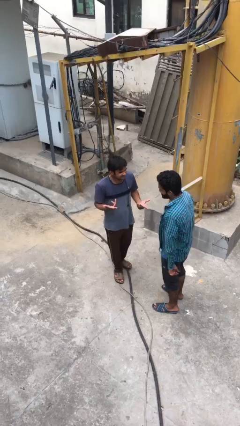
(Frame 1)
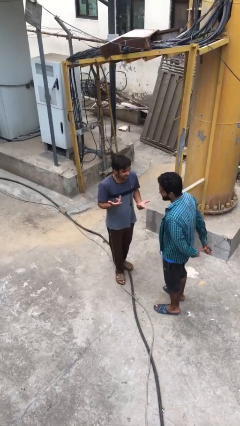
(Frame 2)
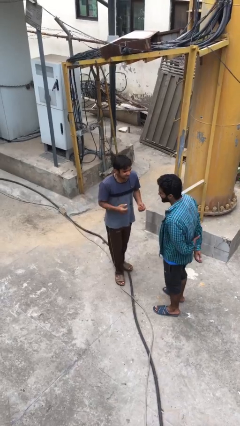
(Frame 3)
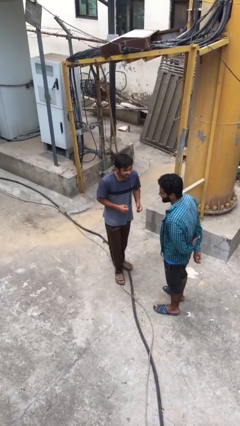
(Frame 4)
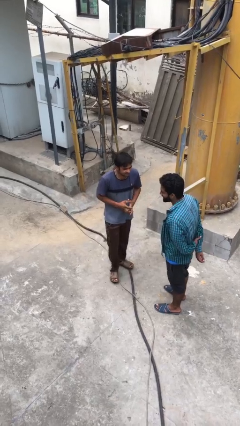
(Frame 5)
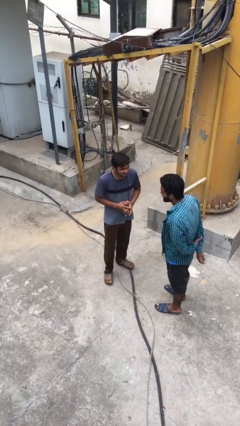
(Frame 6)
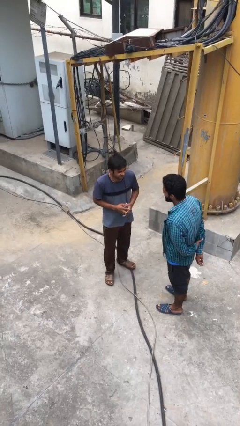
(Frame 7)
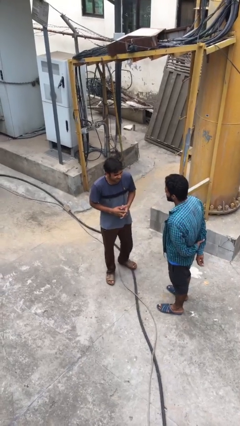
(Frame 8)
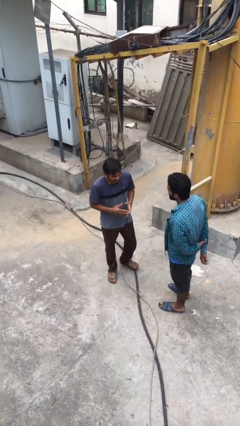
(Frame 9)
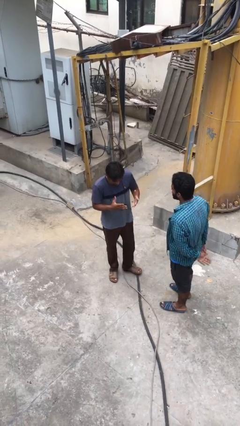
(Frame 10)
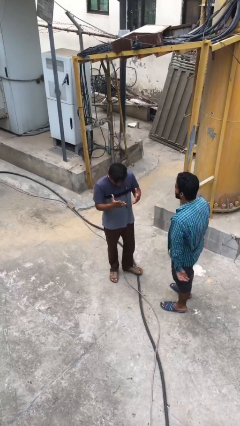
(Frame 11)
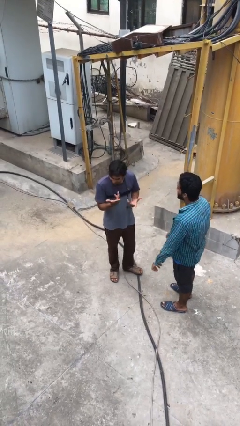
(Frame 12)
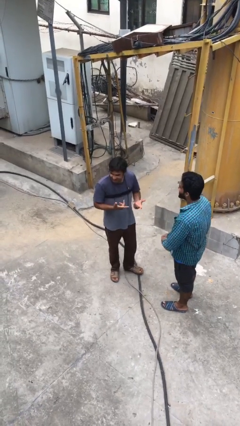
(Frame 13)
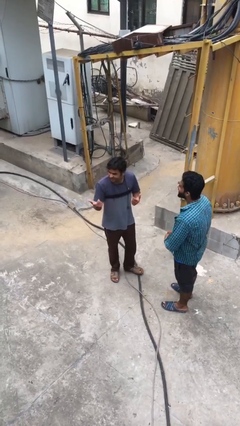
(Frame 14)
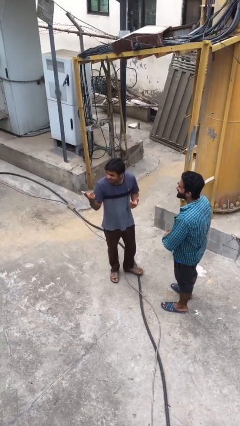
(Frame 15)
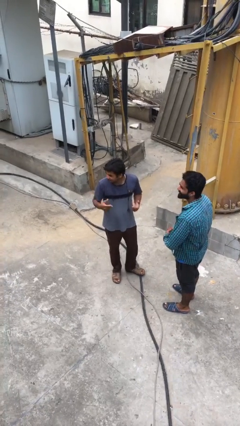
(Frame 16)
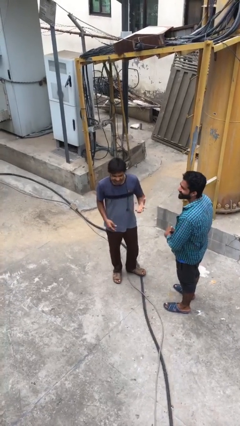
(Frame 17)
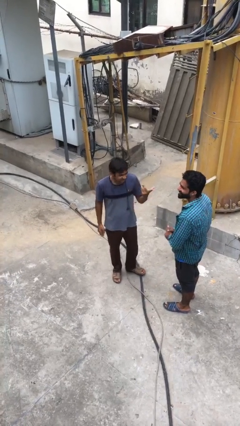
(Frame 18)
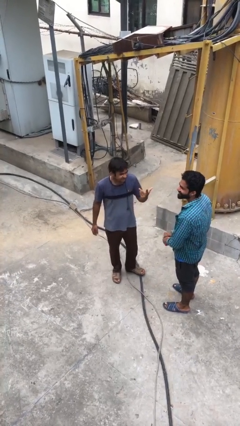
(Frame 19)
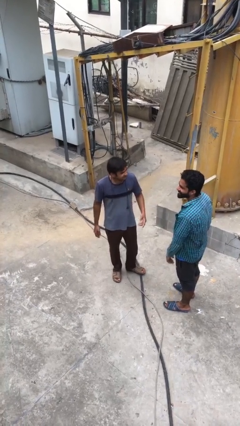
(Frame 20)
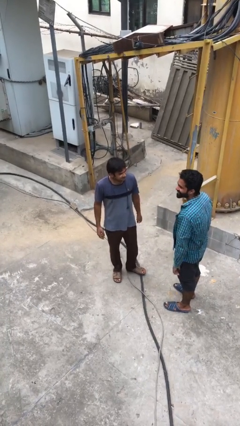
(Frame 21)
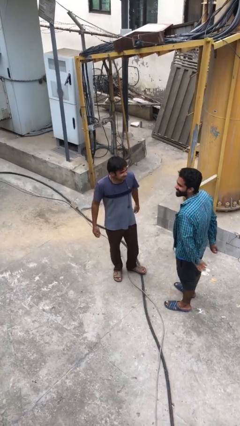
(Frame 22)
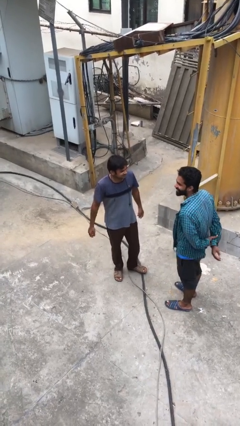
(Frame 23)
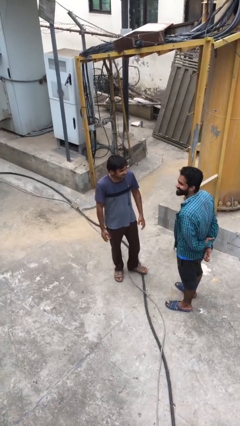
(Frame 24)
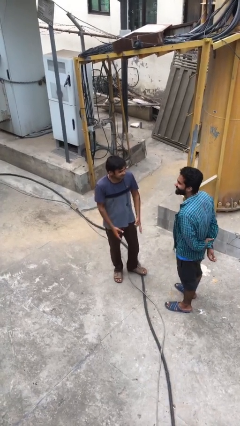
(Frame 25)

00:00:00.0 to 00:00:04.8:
person talks to person

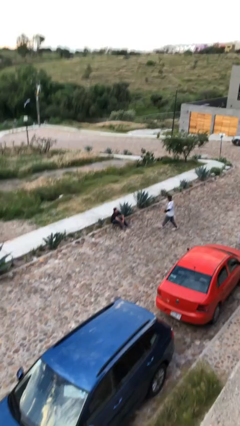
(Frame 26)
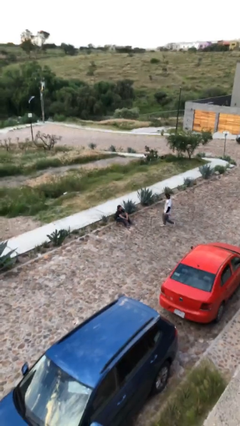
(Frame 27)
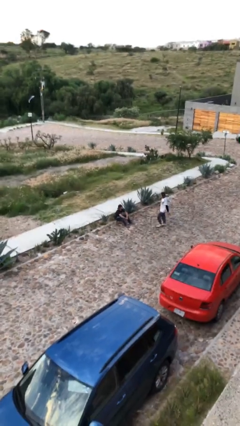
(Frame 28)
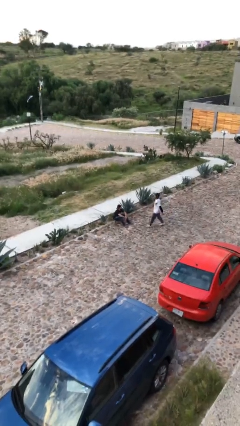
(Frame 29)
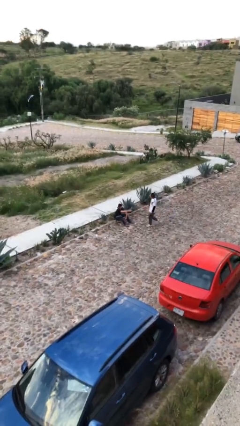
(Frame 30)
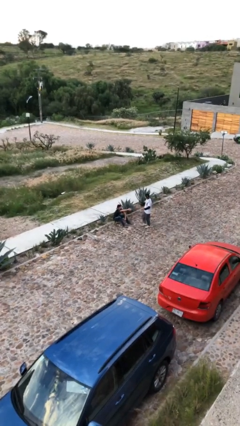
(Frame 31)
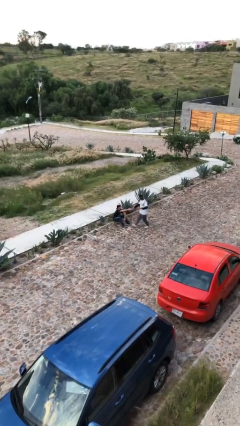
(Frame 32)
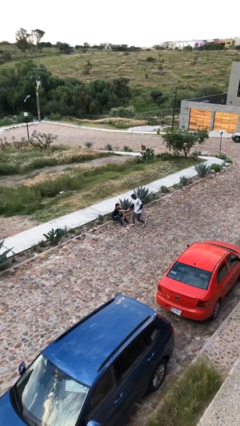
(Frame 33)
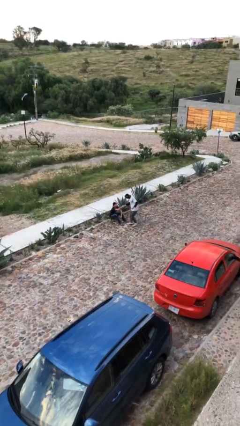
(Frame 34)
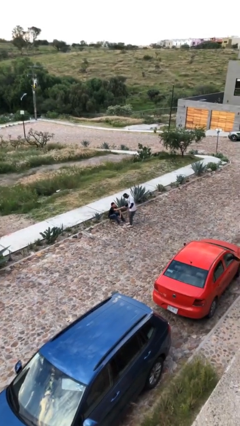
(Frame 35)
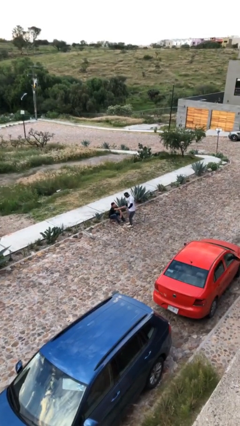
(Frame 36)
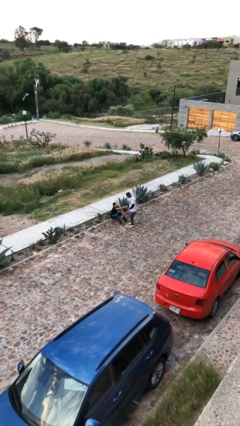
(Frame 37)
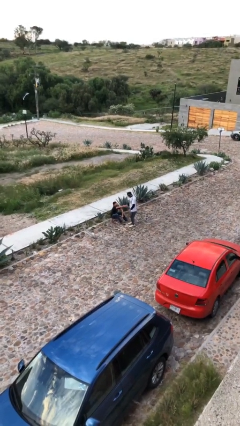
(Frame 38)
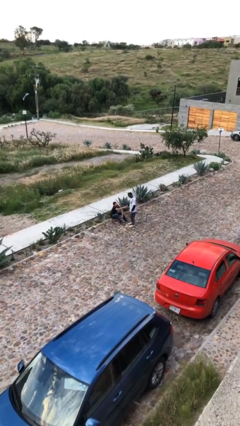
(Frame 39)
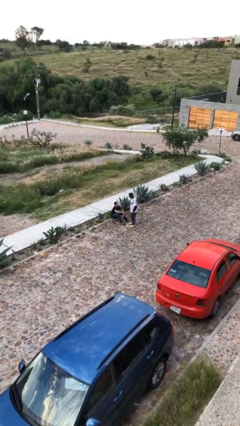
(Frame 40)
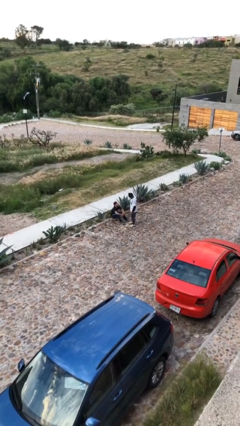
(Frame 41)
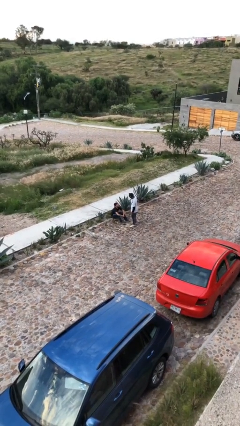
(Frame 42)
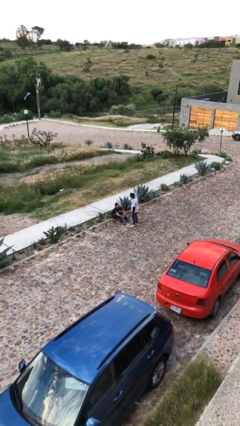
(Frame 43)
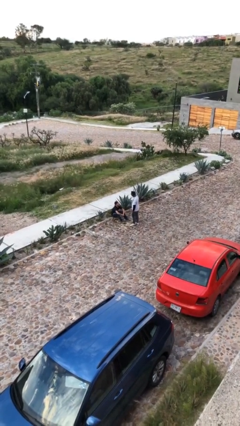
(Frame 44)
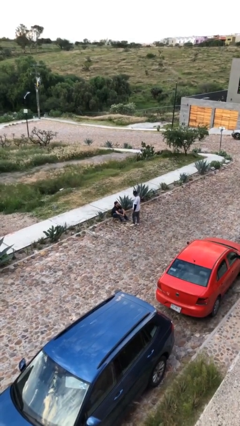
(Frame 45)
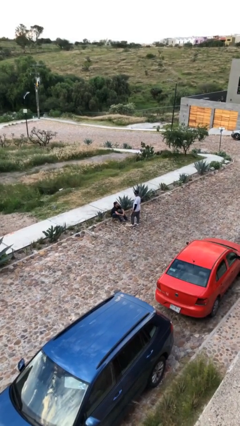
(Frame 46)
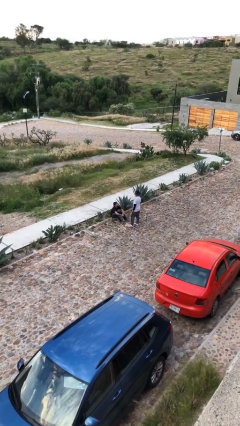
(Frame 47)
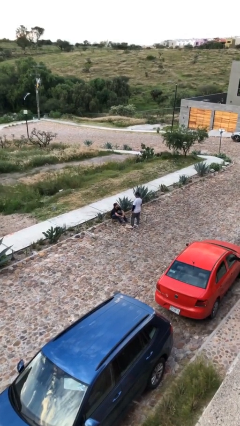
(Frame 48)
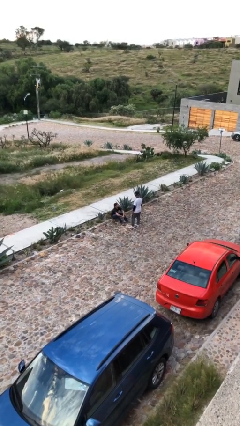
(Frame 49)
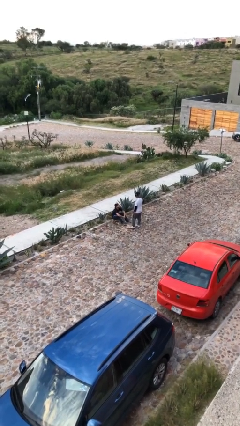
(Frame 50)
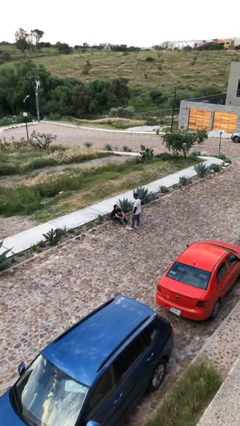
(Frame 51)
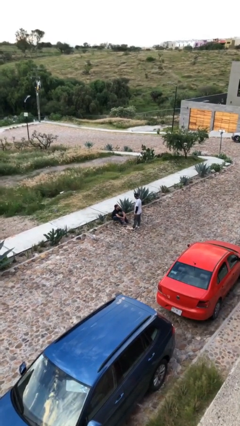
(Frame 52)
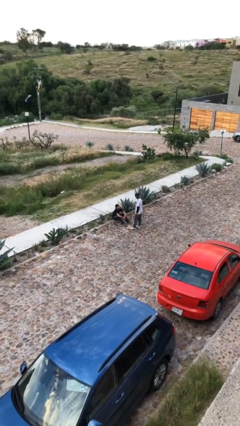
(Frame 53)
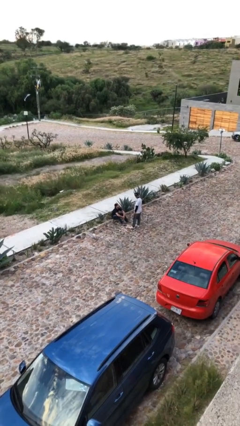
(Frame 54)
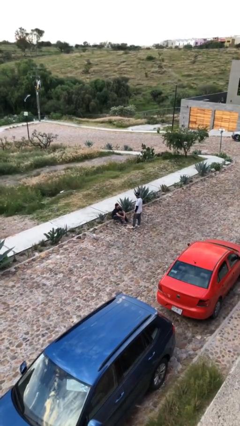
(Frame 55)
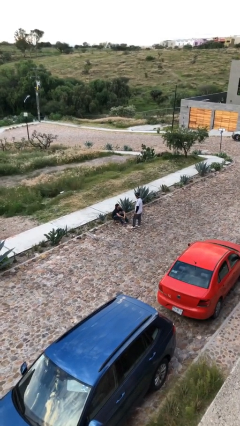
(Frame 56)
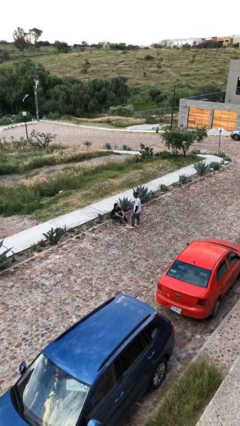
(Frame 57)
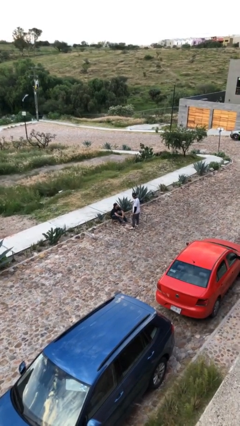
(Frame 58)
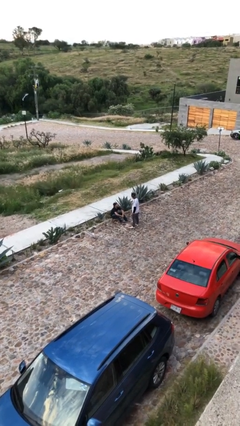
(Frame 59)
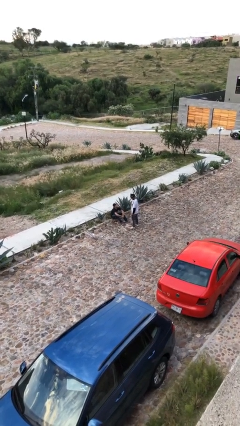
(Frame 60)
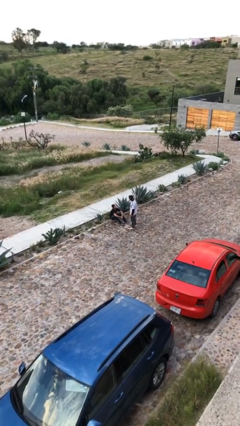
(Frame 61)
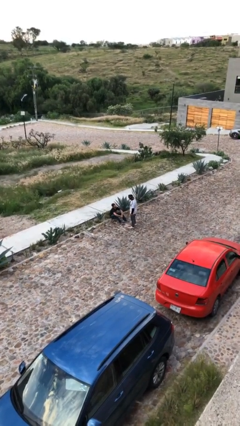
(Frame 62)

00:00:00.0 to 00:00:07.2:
person shakes hand

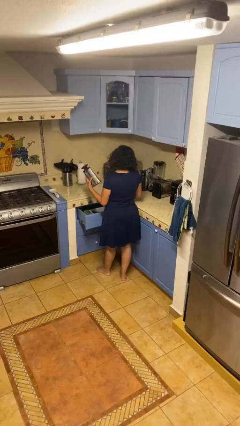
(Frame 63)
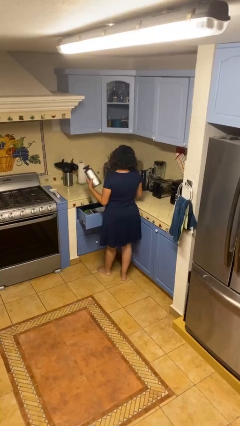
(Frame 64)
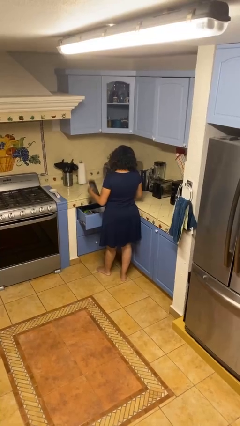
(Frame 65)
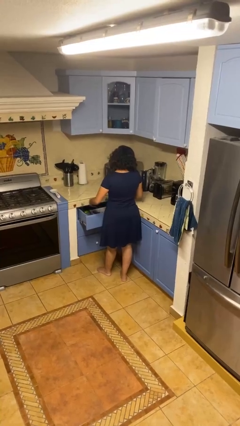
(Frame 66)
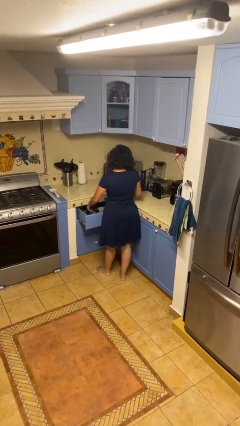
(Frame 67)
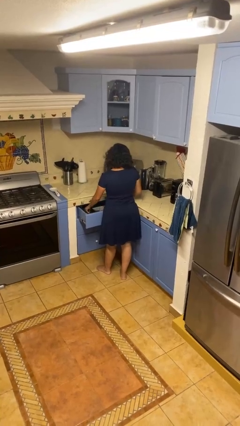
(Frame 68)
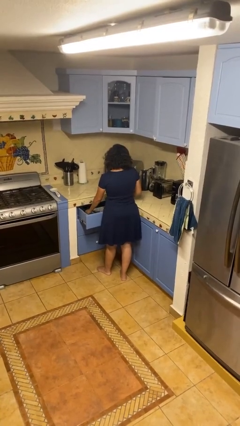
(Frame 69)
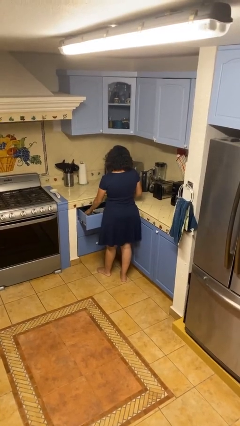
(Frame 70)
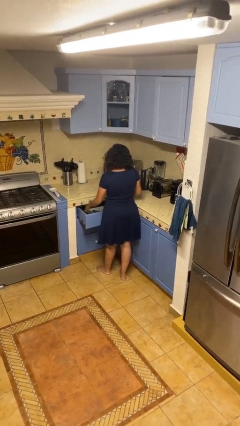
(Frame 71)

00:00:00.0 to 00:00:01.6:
person puts object into kitchen drawer

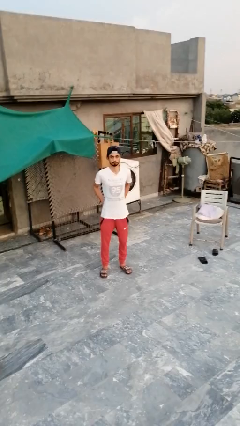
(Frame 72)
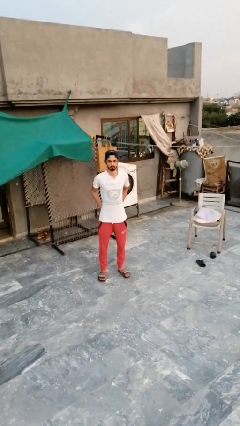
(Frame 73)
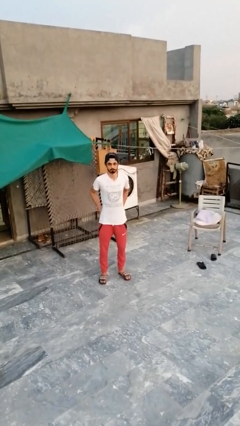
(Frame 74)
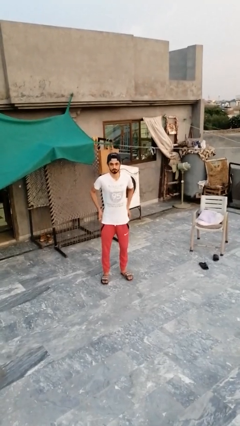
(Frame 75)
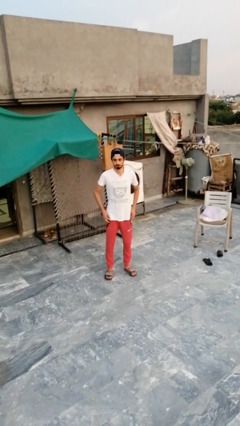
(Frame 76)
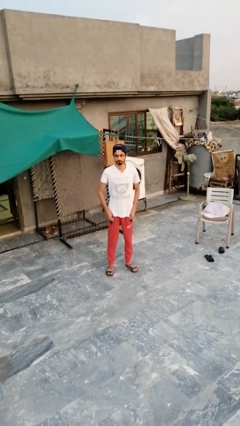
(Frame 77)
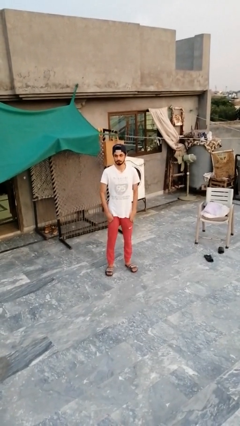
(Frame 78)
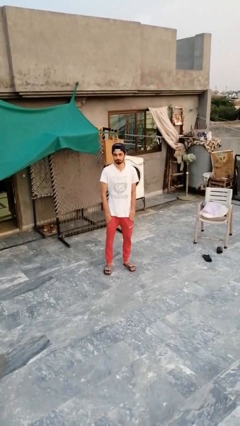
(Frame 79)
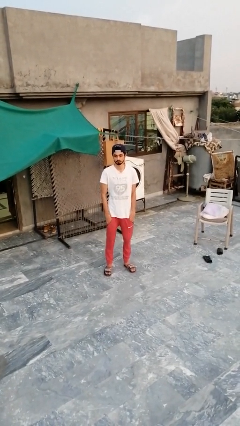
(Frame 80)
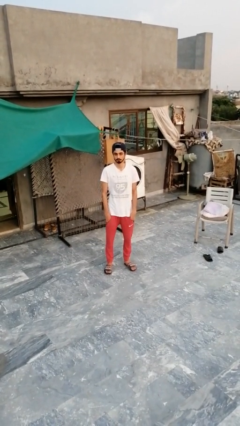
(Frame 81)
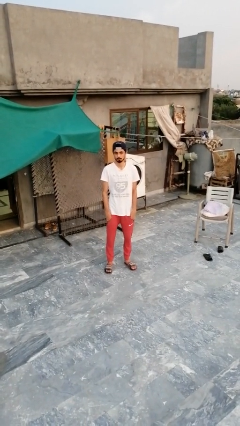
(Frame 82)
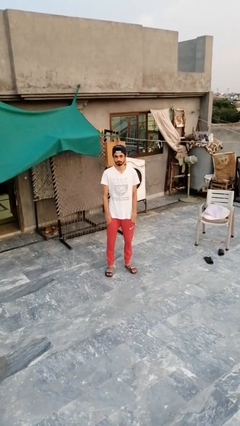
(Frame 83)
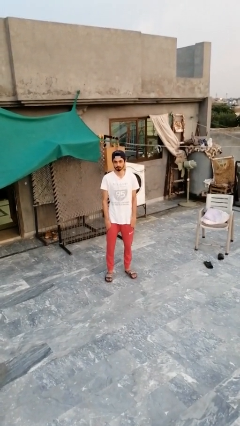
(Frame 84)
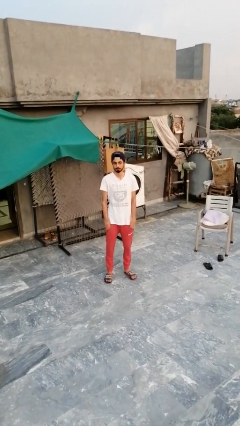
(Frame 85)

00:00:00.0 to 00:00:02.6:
person puts hands in back pockets

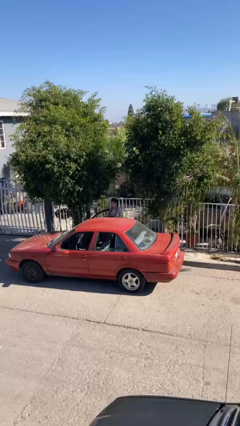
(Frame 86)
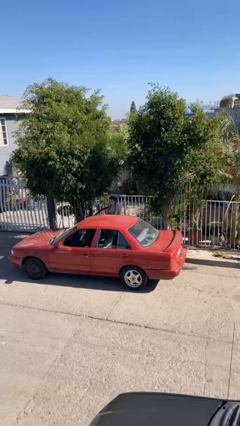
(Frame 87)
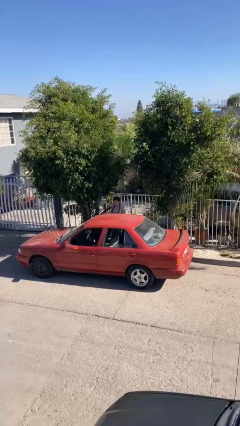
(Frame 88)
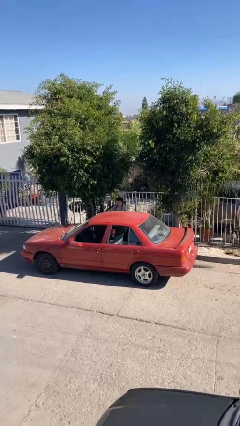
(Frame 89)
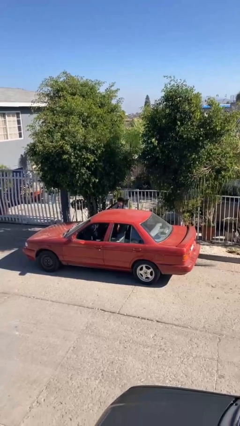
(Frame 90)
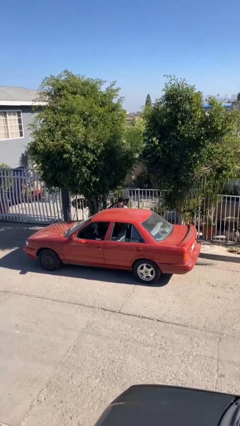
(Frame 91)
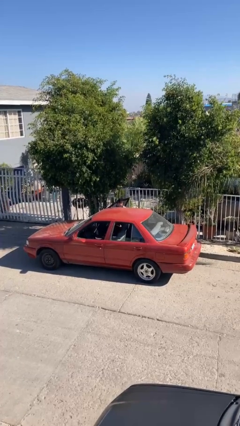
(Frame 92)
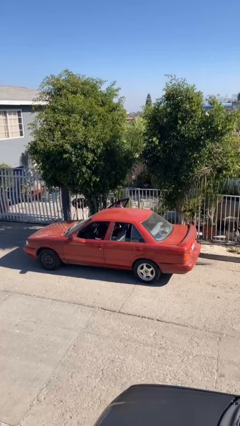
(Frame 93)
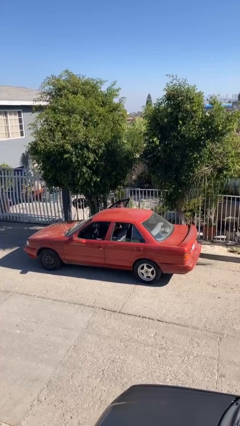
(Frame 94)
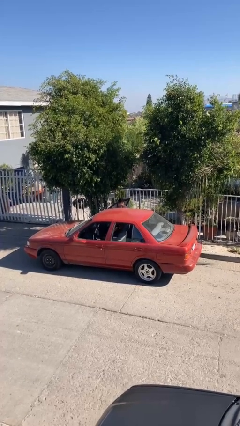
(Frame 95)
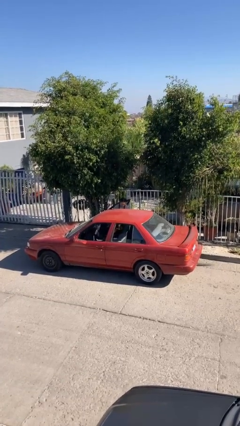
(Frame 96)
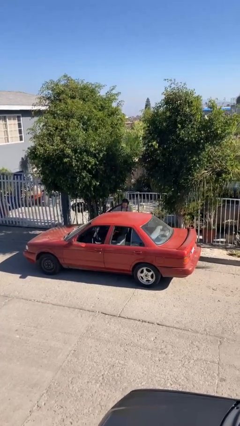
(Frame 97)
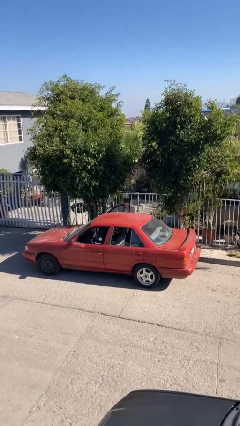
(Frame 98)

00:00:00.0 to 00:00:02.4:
person loads car
